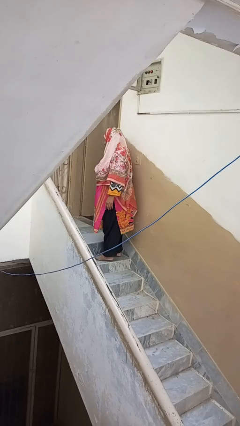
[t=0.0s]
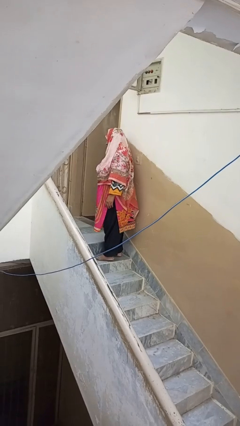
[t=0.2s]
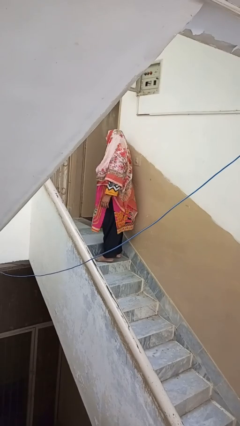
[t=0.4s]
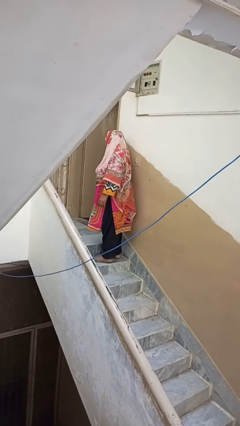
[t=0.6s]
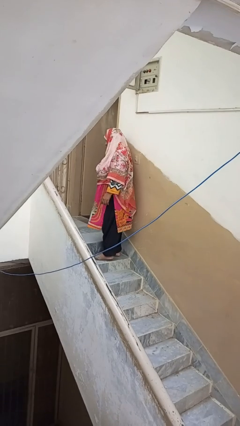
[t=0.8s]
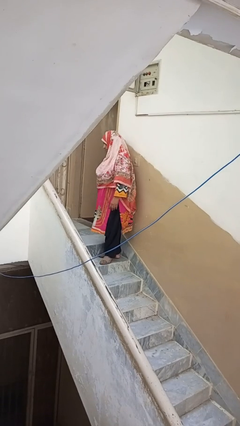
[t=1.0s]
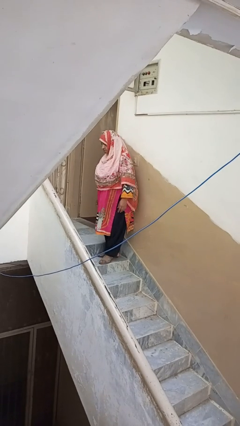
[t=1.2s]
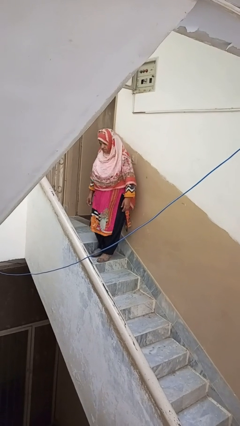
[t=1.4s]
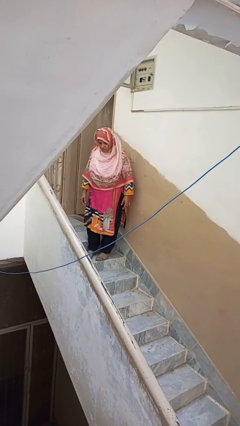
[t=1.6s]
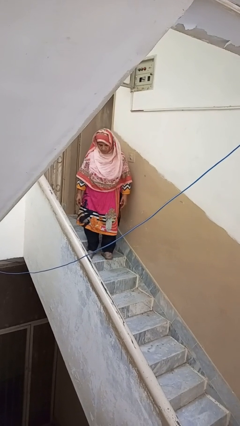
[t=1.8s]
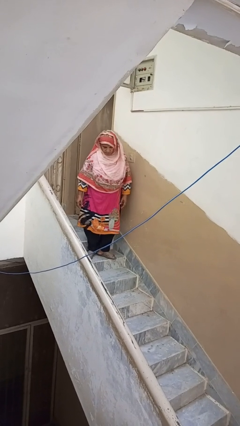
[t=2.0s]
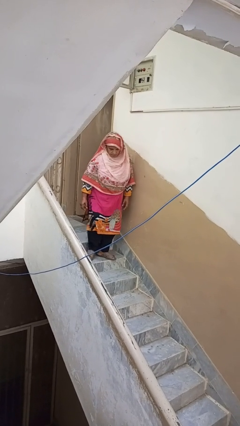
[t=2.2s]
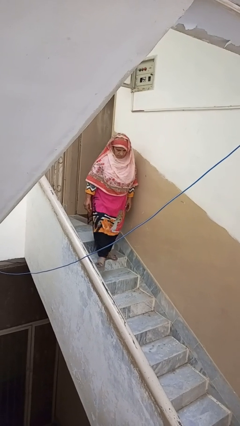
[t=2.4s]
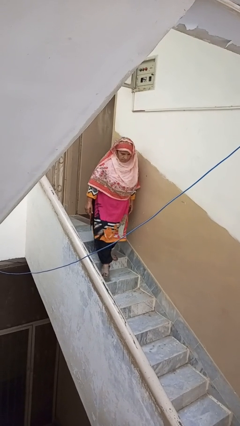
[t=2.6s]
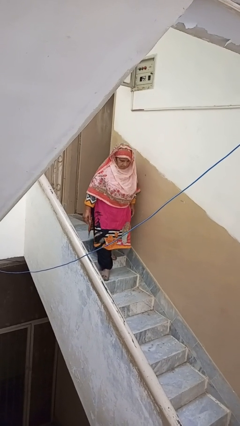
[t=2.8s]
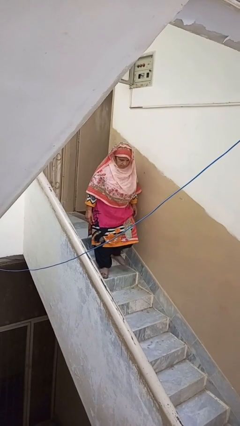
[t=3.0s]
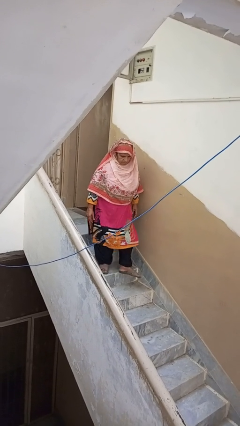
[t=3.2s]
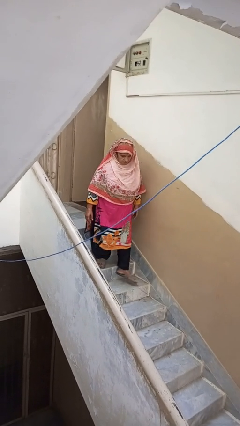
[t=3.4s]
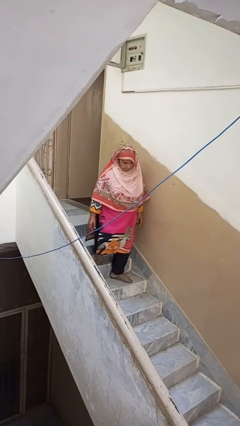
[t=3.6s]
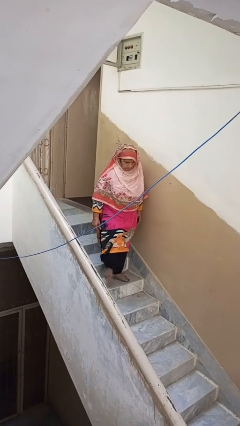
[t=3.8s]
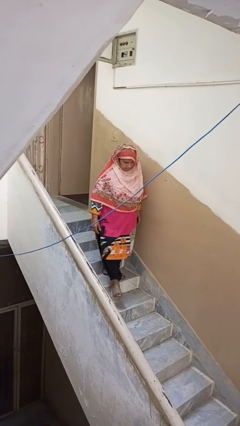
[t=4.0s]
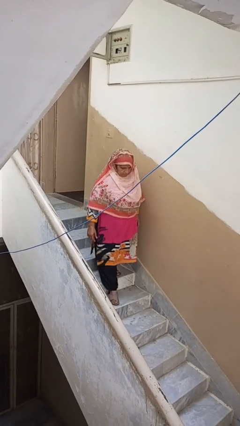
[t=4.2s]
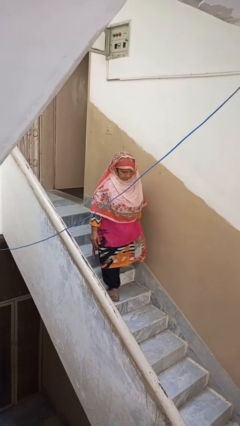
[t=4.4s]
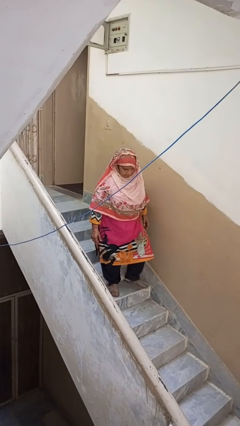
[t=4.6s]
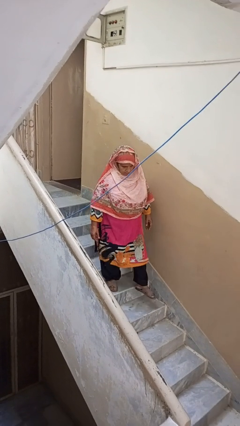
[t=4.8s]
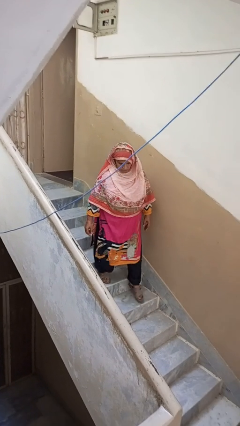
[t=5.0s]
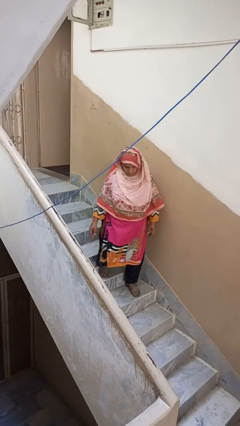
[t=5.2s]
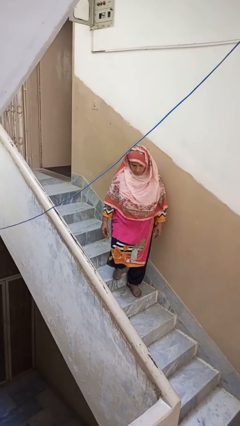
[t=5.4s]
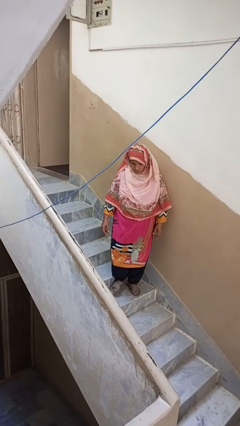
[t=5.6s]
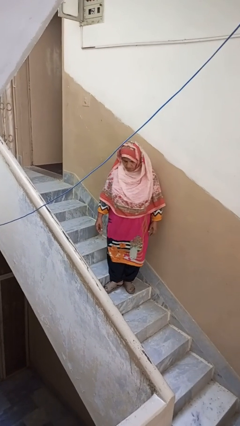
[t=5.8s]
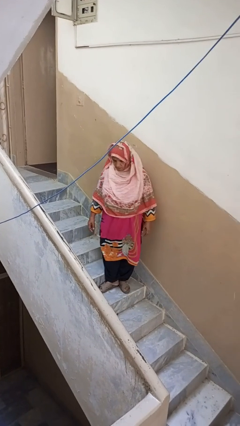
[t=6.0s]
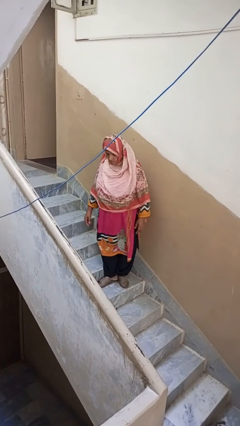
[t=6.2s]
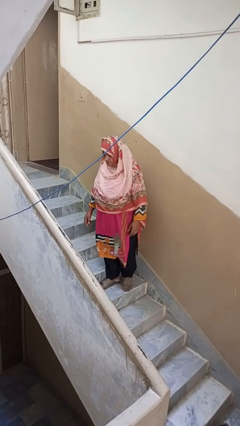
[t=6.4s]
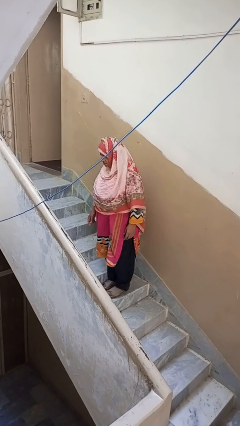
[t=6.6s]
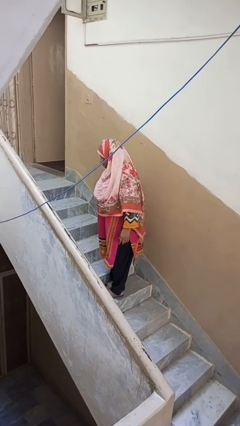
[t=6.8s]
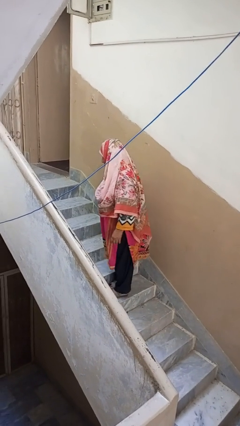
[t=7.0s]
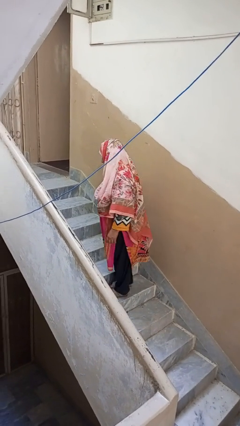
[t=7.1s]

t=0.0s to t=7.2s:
person climbs down stairs

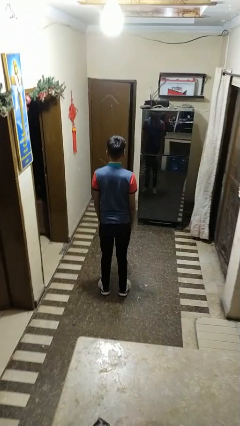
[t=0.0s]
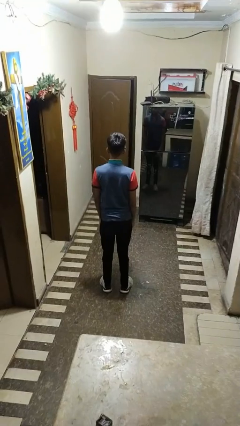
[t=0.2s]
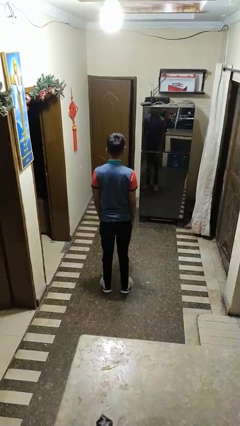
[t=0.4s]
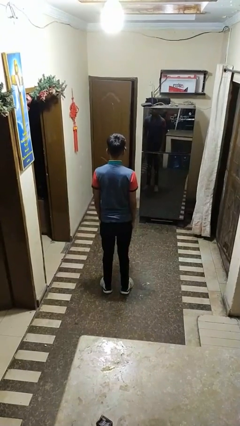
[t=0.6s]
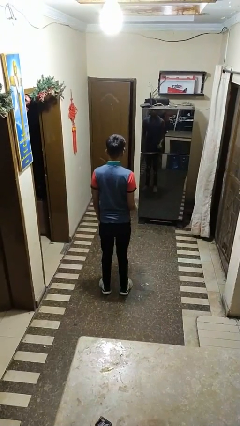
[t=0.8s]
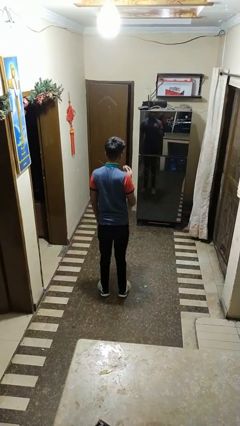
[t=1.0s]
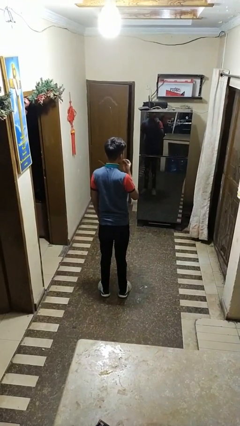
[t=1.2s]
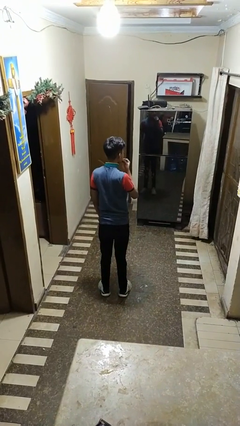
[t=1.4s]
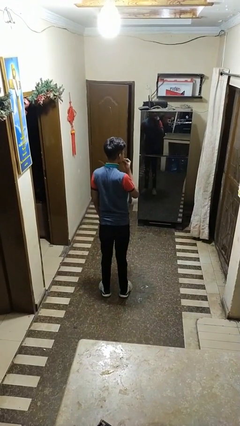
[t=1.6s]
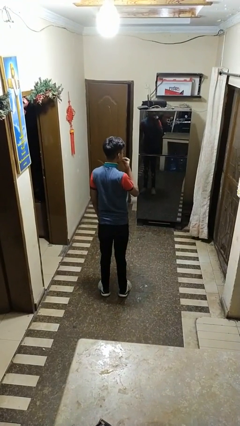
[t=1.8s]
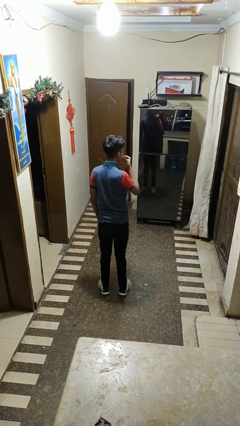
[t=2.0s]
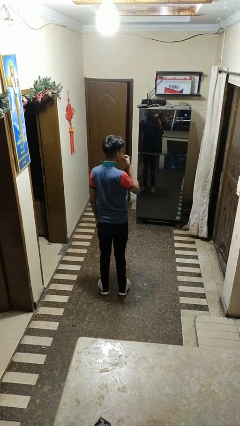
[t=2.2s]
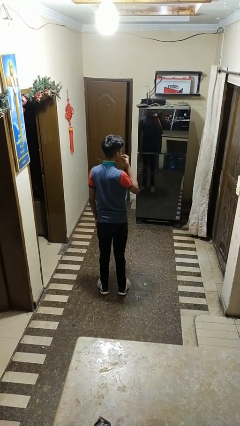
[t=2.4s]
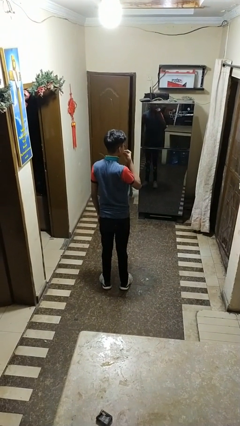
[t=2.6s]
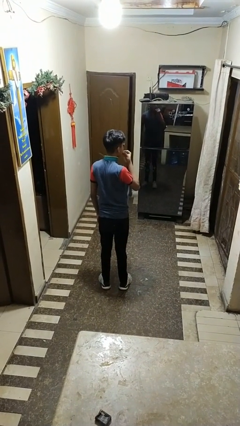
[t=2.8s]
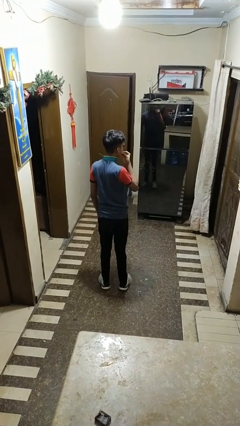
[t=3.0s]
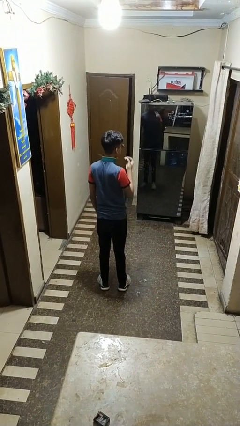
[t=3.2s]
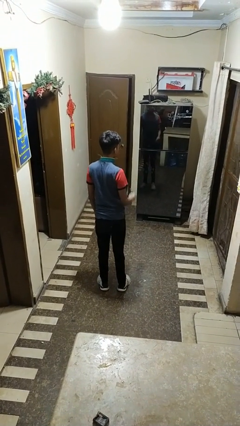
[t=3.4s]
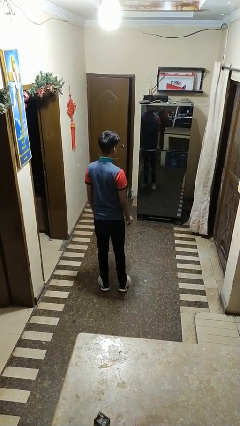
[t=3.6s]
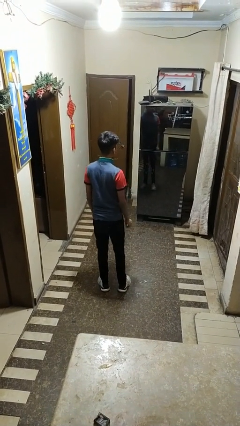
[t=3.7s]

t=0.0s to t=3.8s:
person flosses

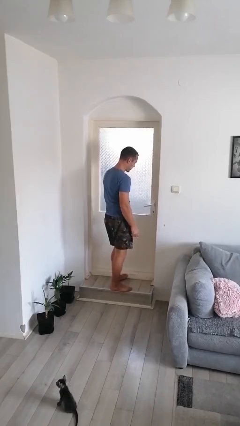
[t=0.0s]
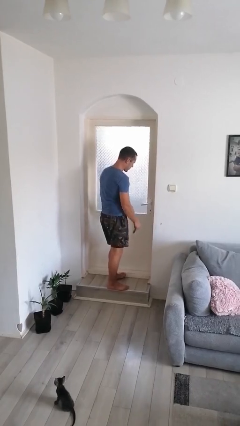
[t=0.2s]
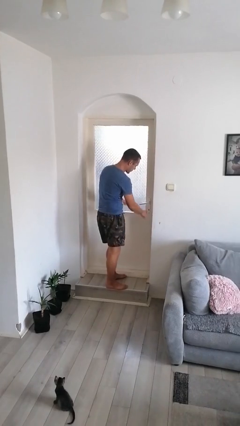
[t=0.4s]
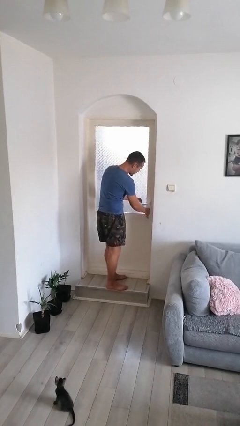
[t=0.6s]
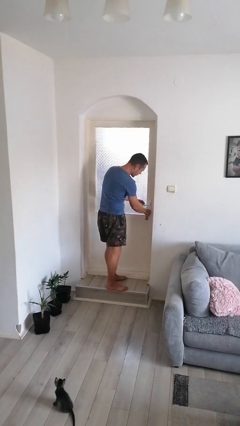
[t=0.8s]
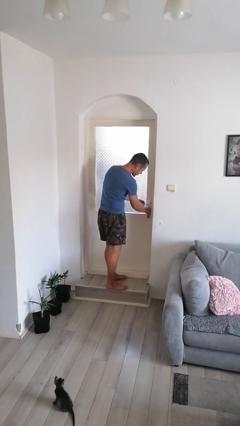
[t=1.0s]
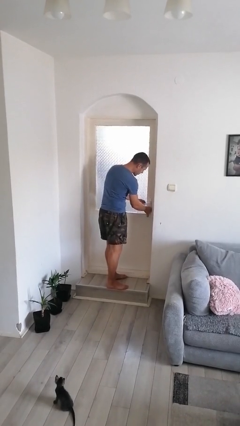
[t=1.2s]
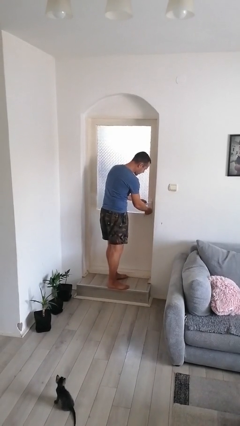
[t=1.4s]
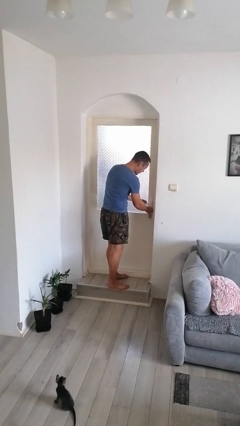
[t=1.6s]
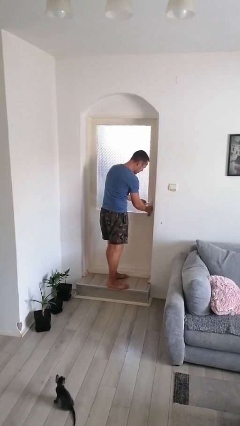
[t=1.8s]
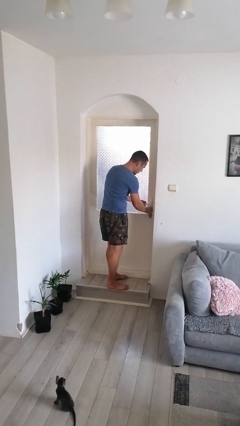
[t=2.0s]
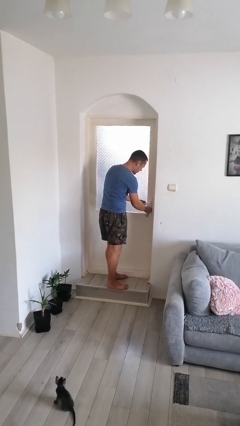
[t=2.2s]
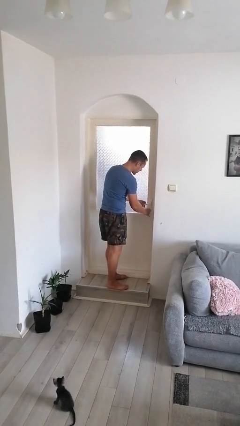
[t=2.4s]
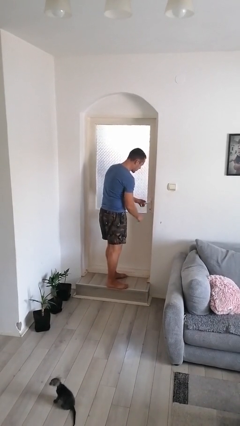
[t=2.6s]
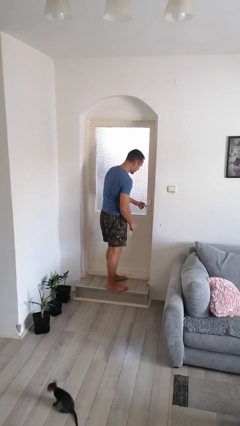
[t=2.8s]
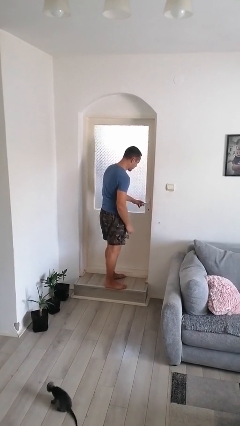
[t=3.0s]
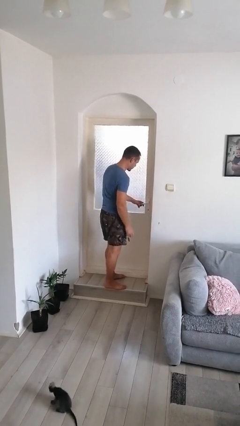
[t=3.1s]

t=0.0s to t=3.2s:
person unlocks door with keys

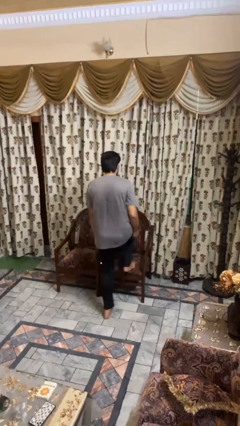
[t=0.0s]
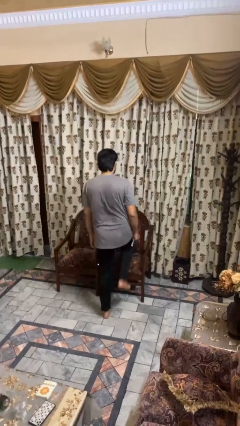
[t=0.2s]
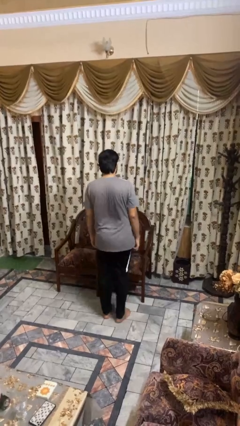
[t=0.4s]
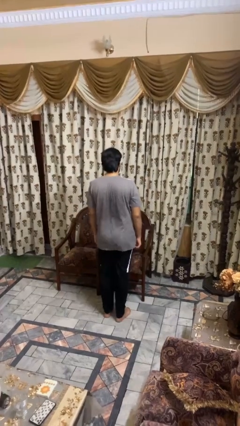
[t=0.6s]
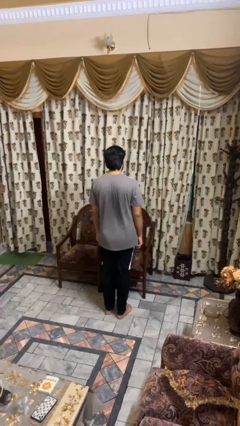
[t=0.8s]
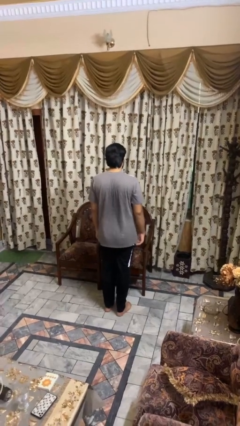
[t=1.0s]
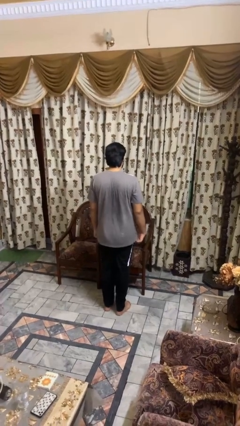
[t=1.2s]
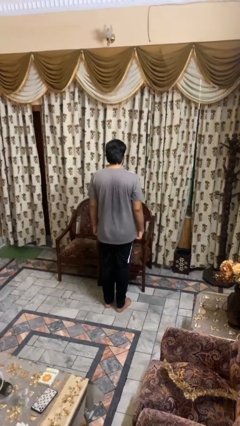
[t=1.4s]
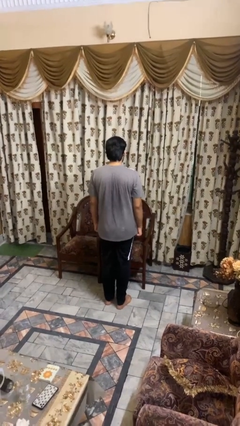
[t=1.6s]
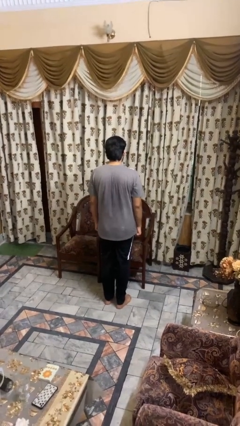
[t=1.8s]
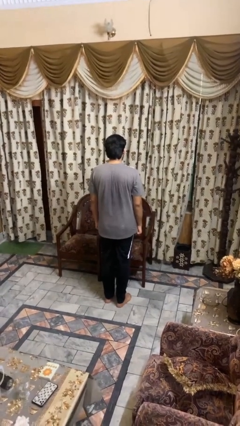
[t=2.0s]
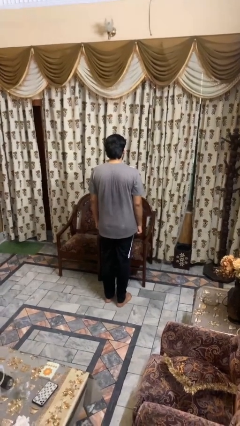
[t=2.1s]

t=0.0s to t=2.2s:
person climbs off chair

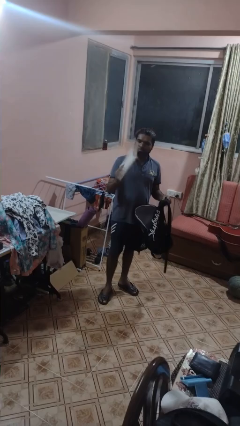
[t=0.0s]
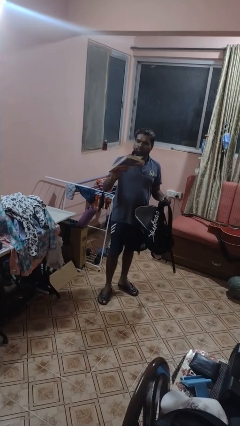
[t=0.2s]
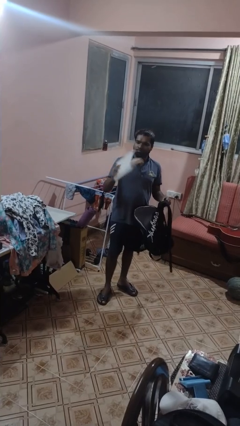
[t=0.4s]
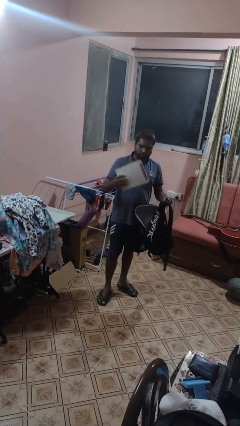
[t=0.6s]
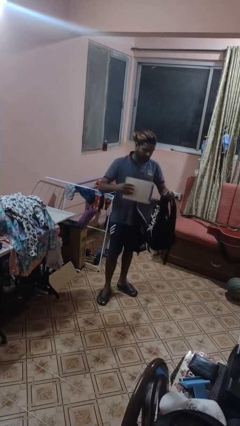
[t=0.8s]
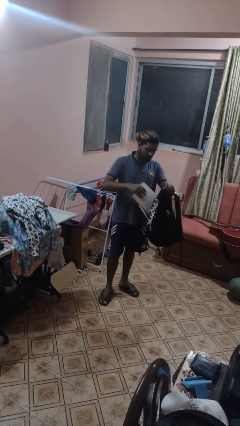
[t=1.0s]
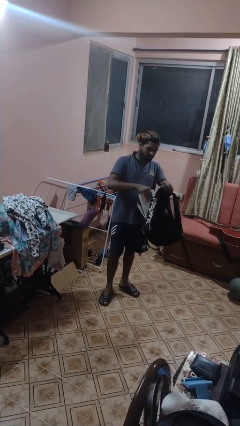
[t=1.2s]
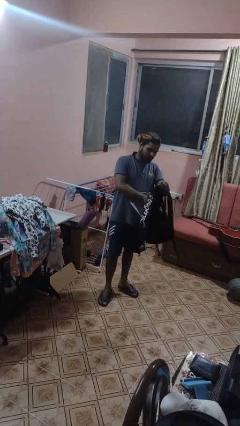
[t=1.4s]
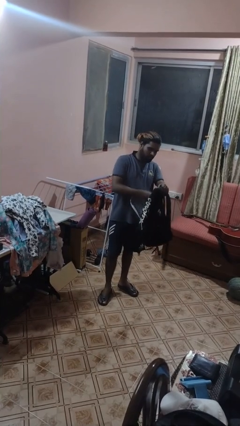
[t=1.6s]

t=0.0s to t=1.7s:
person takes object from backpack
